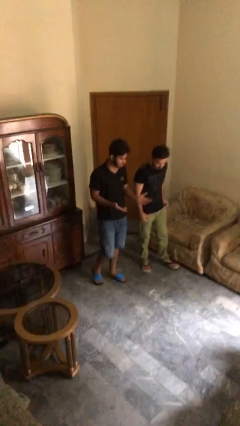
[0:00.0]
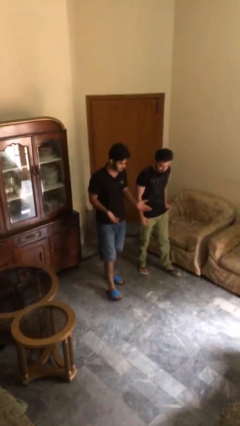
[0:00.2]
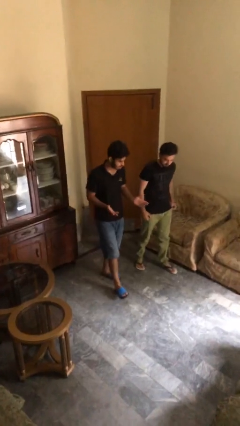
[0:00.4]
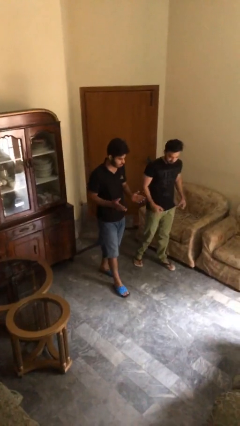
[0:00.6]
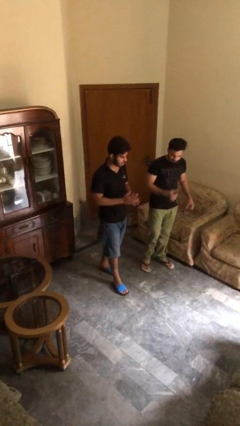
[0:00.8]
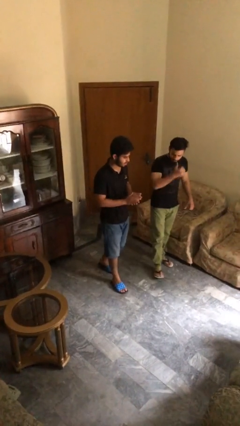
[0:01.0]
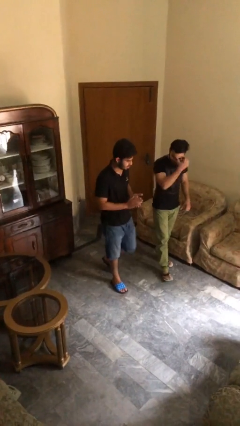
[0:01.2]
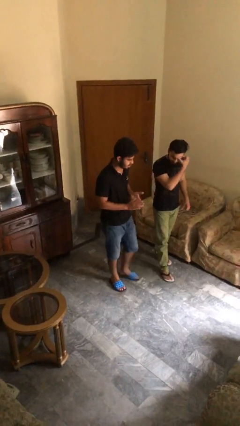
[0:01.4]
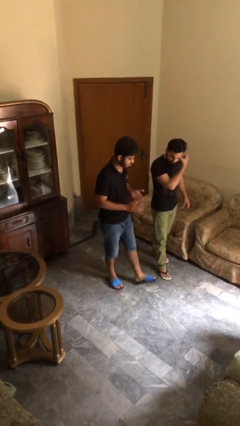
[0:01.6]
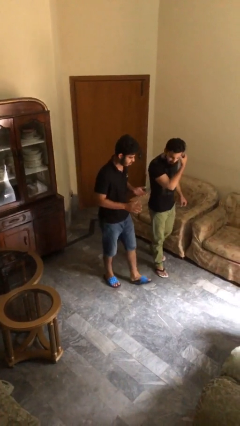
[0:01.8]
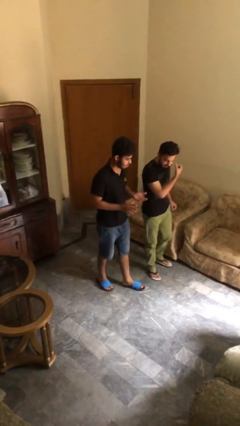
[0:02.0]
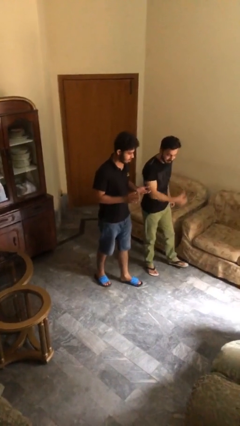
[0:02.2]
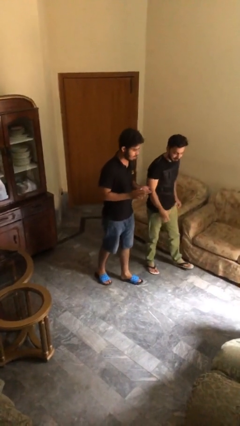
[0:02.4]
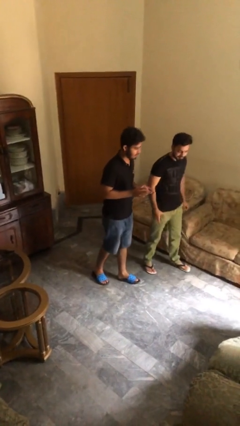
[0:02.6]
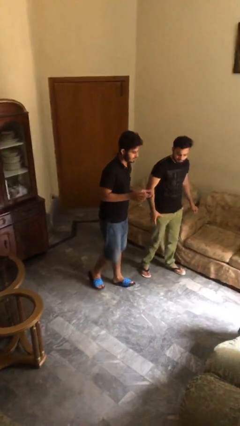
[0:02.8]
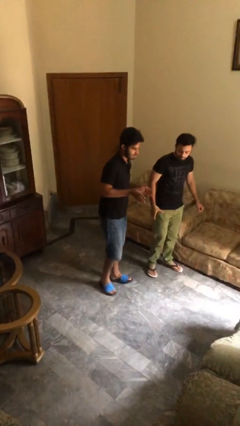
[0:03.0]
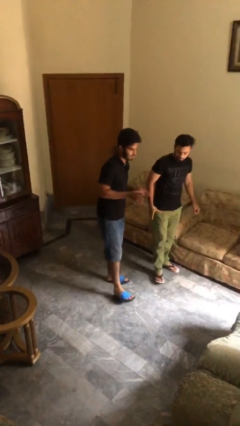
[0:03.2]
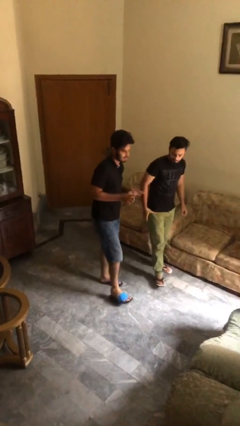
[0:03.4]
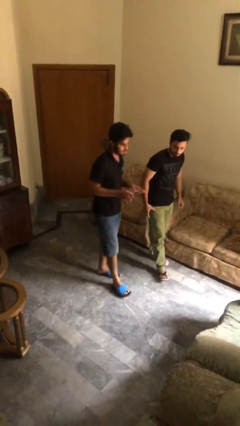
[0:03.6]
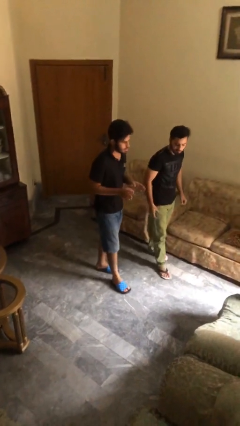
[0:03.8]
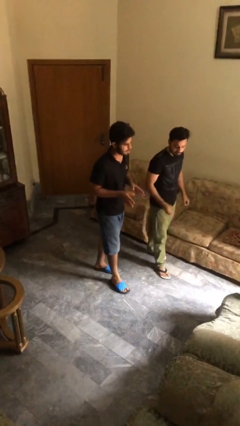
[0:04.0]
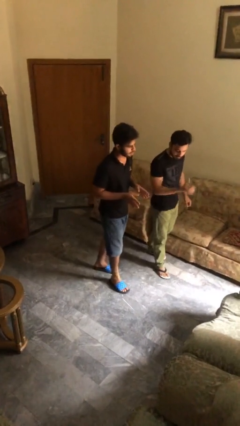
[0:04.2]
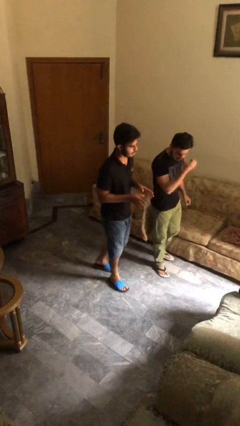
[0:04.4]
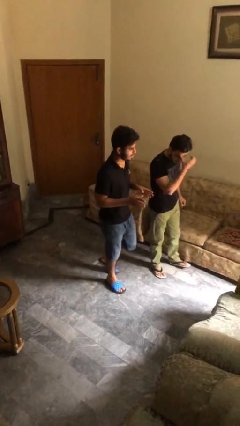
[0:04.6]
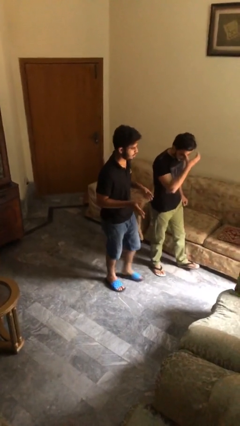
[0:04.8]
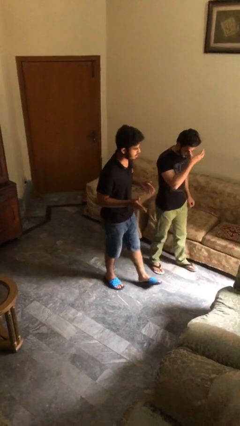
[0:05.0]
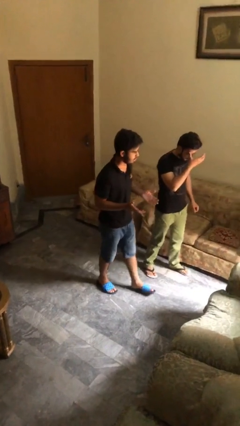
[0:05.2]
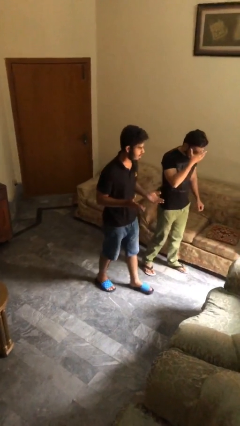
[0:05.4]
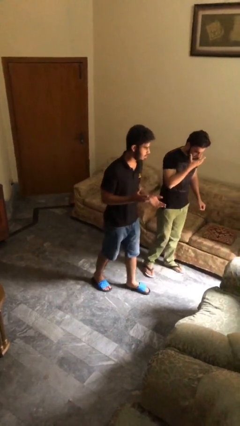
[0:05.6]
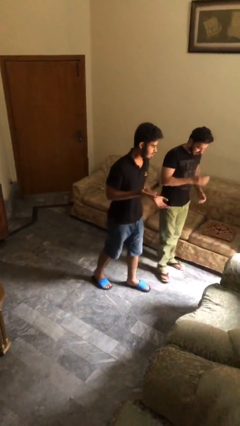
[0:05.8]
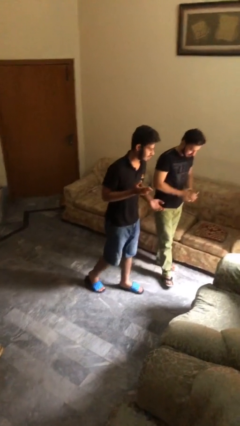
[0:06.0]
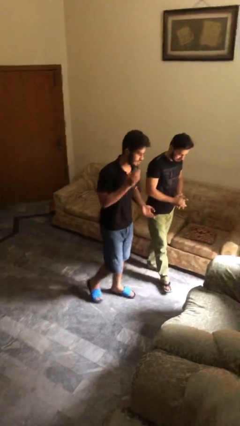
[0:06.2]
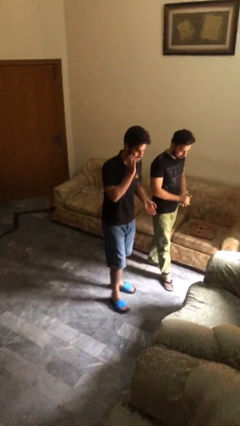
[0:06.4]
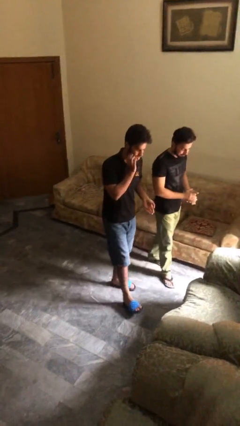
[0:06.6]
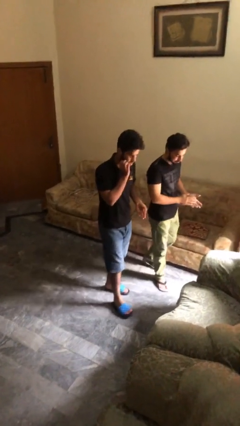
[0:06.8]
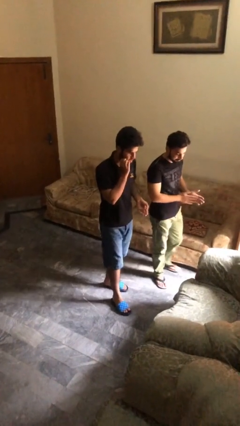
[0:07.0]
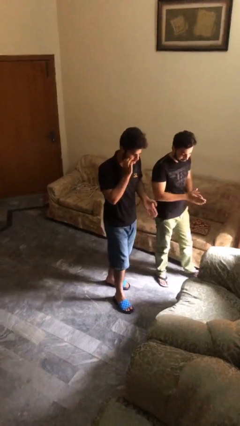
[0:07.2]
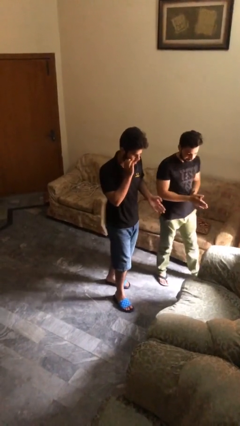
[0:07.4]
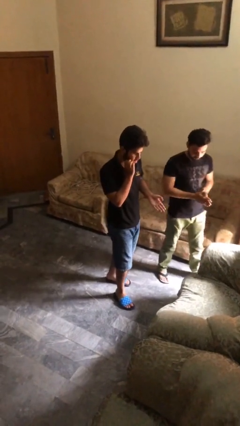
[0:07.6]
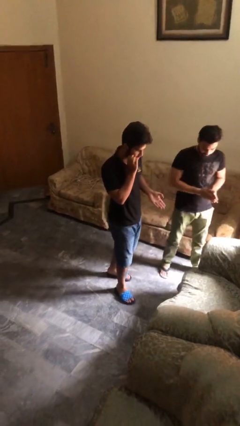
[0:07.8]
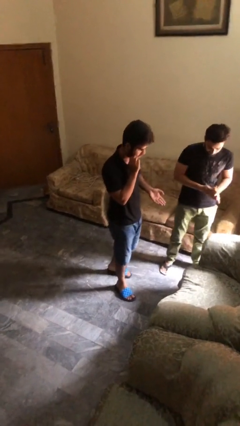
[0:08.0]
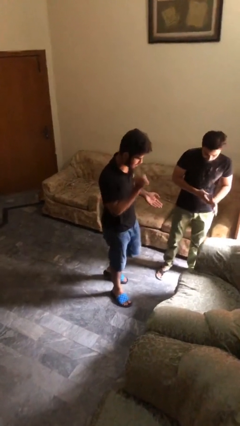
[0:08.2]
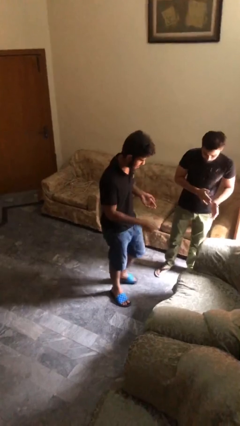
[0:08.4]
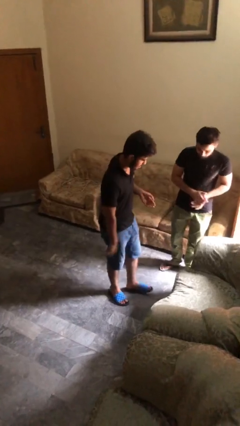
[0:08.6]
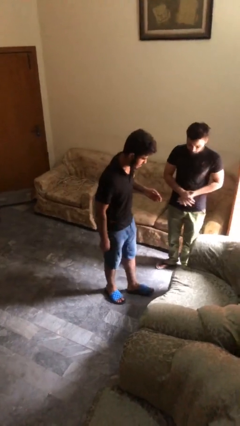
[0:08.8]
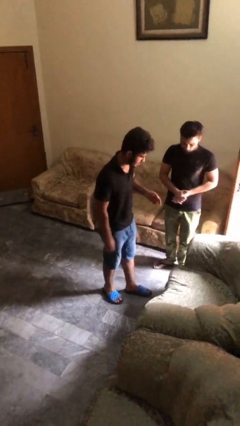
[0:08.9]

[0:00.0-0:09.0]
person talks to person

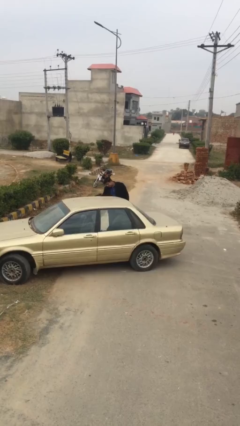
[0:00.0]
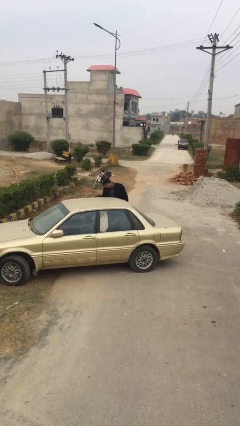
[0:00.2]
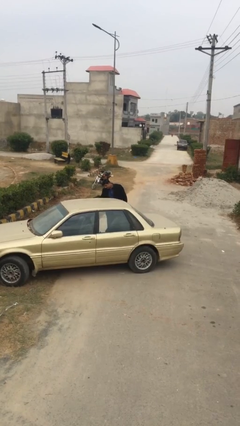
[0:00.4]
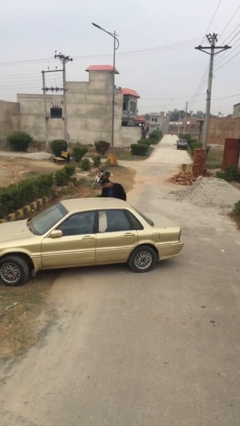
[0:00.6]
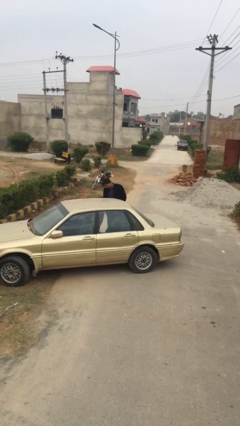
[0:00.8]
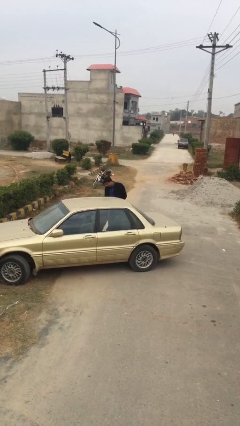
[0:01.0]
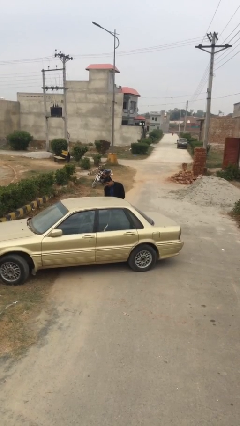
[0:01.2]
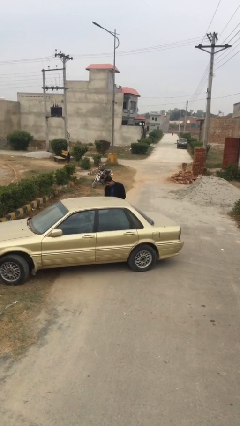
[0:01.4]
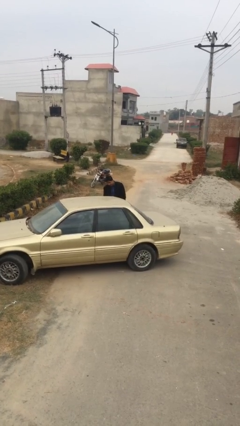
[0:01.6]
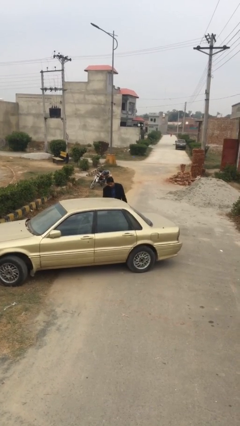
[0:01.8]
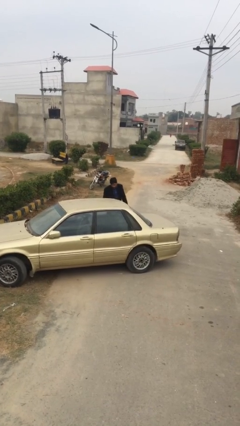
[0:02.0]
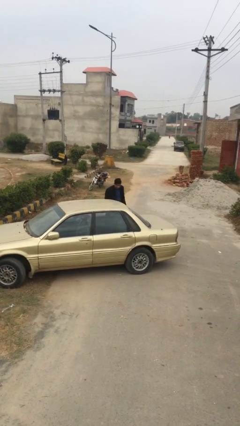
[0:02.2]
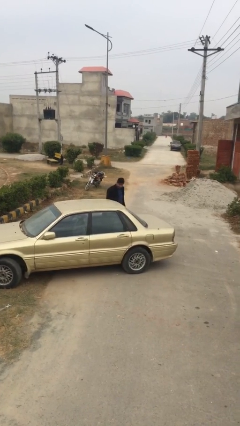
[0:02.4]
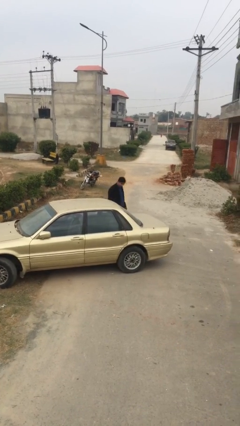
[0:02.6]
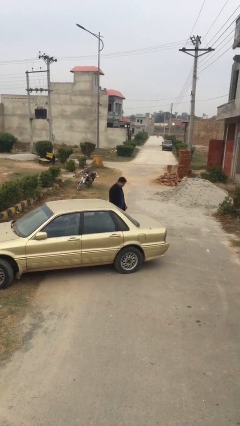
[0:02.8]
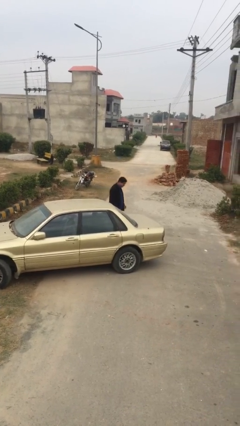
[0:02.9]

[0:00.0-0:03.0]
person closes car door

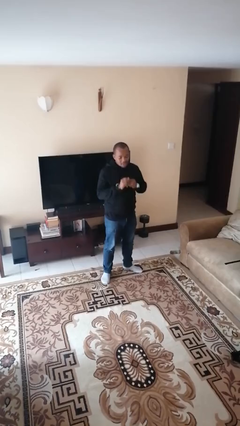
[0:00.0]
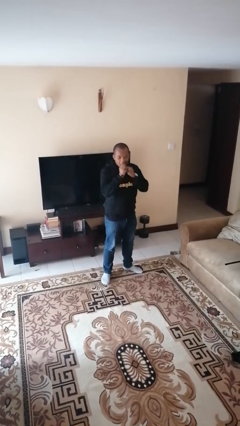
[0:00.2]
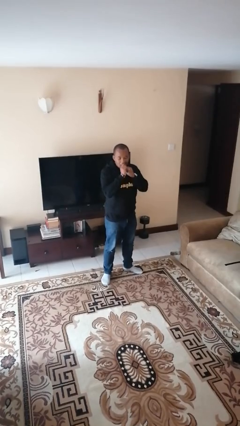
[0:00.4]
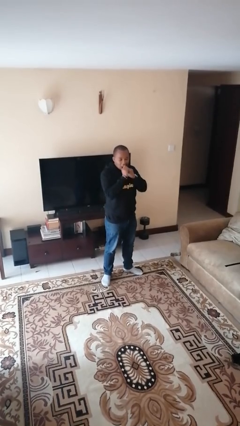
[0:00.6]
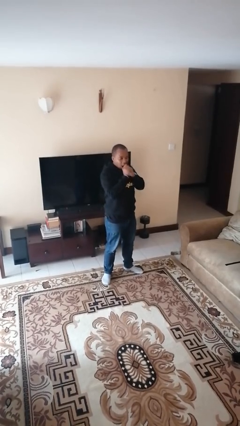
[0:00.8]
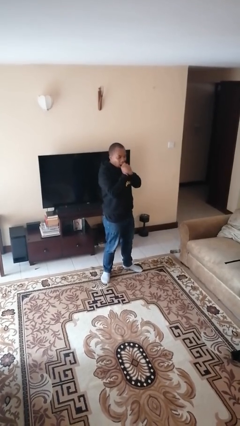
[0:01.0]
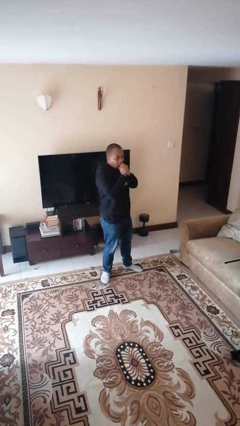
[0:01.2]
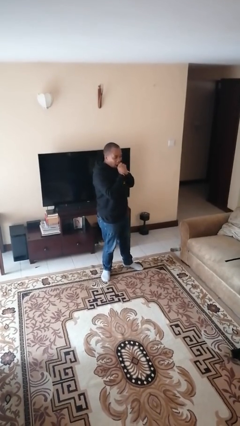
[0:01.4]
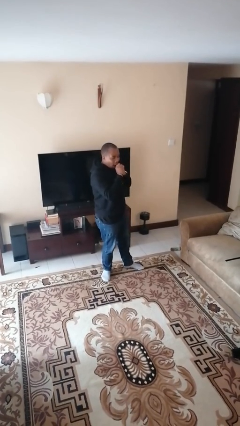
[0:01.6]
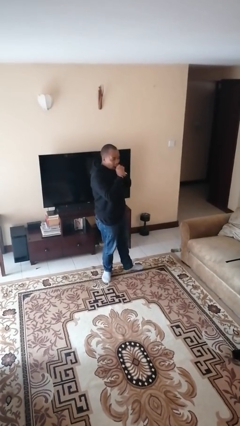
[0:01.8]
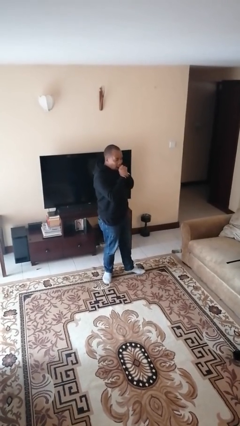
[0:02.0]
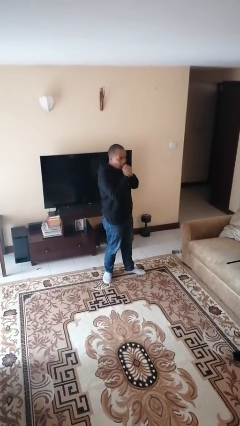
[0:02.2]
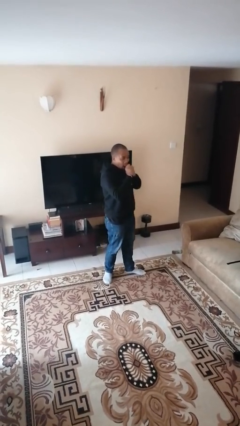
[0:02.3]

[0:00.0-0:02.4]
person flosses

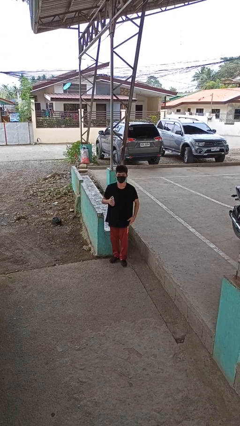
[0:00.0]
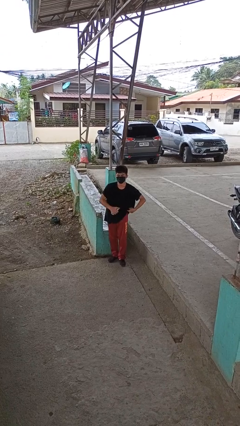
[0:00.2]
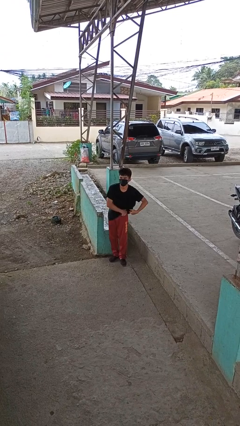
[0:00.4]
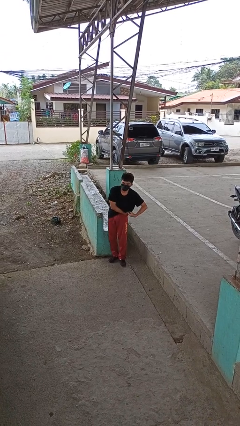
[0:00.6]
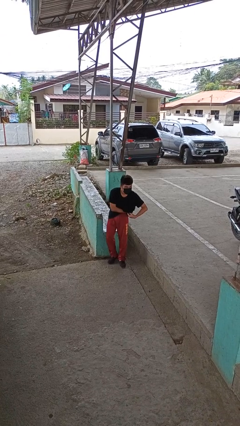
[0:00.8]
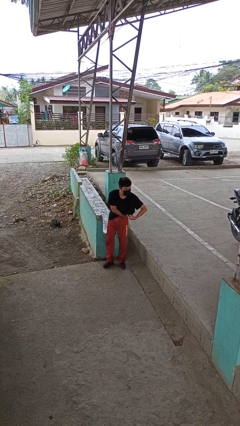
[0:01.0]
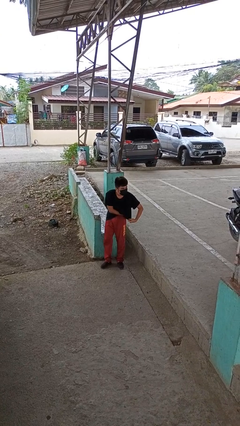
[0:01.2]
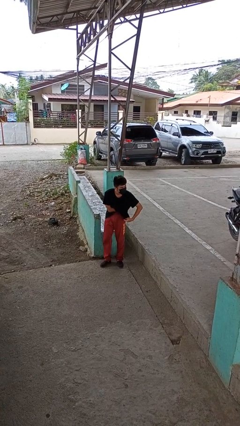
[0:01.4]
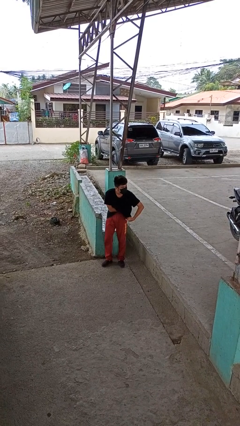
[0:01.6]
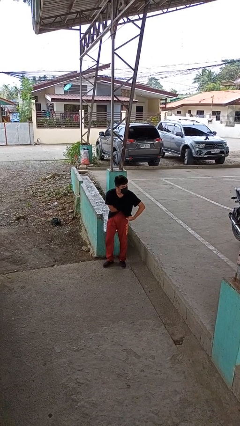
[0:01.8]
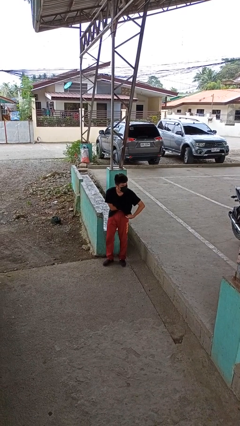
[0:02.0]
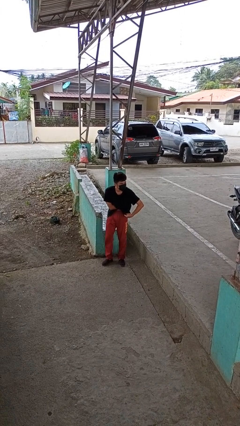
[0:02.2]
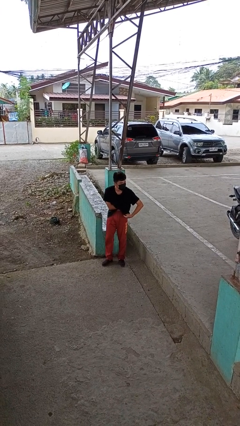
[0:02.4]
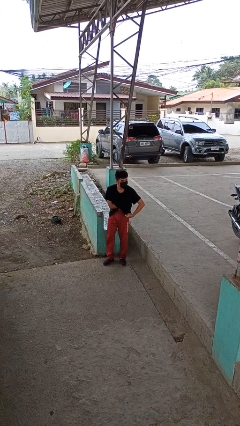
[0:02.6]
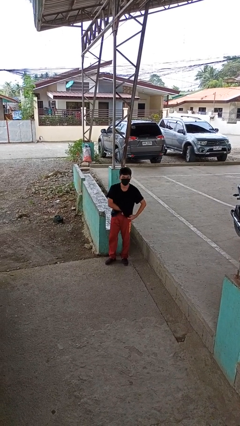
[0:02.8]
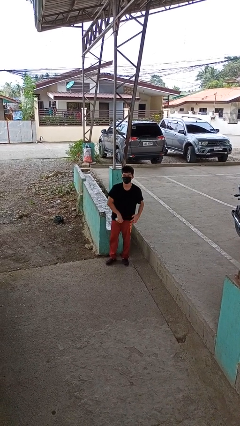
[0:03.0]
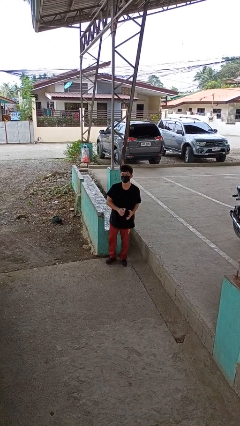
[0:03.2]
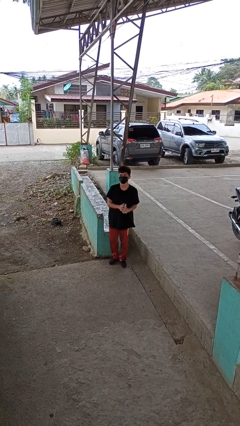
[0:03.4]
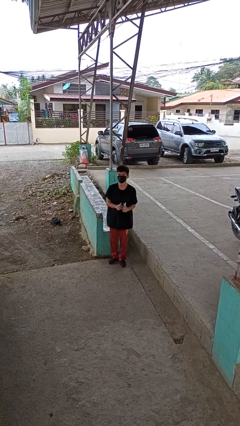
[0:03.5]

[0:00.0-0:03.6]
person applies deodorant
